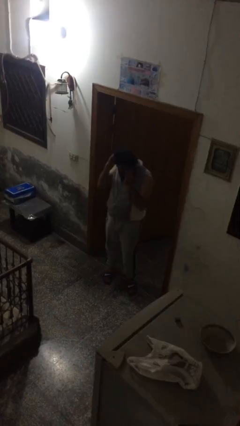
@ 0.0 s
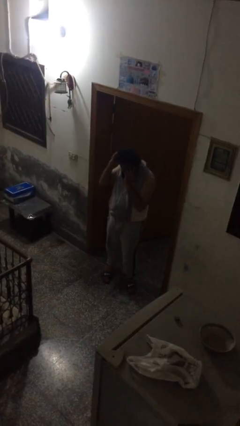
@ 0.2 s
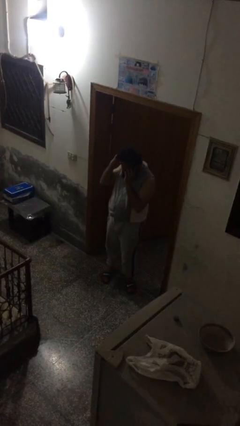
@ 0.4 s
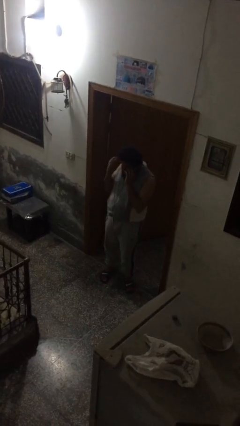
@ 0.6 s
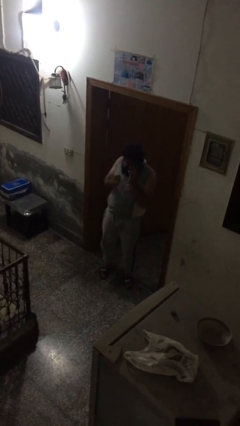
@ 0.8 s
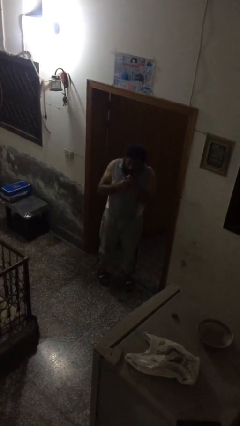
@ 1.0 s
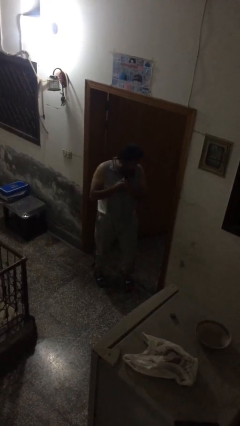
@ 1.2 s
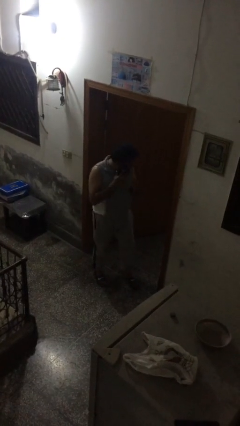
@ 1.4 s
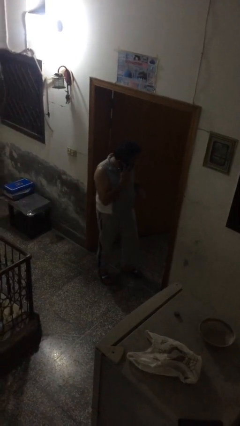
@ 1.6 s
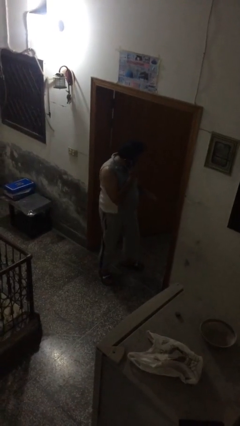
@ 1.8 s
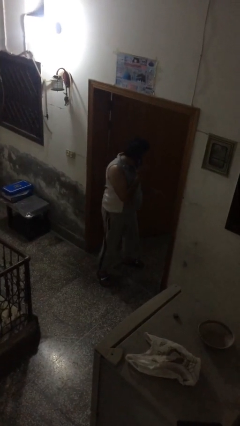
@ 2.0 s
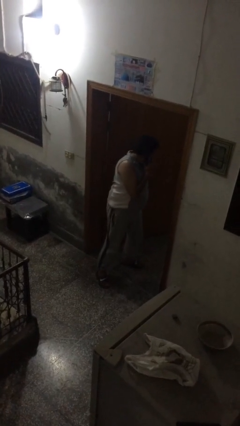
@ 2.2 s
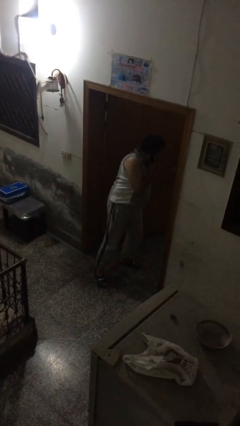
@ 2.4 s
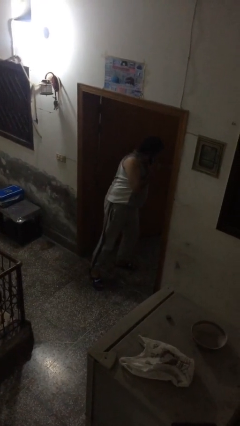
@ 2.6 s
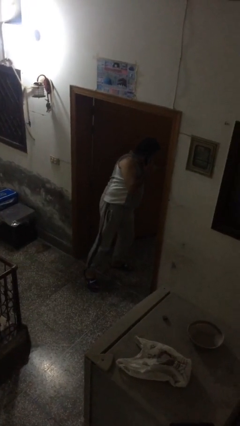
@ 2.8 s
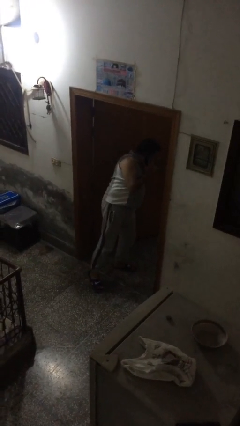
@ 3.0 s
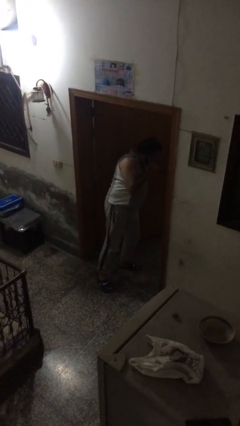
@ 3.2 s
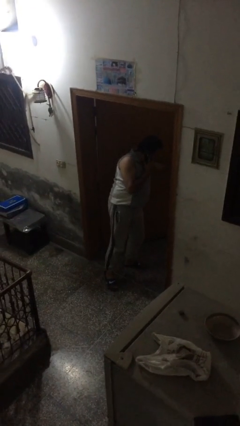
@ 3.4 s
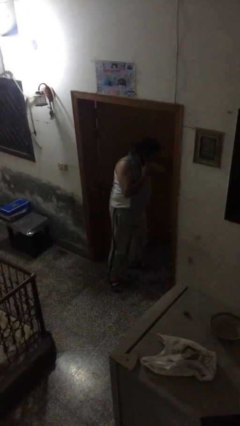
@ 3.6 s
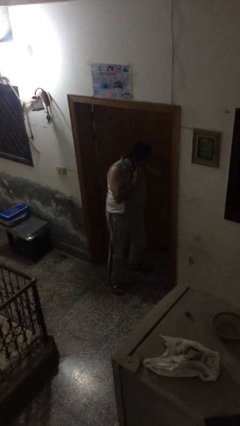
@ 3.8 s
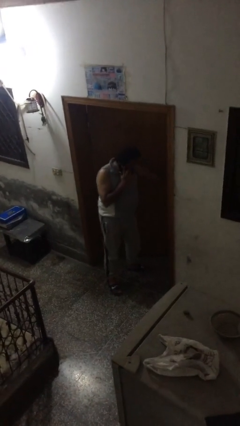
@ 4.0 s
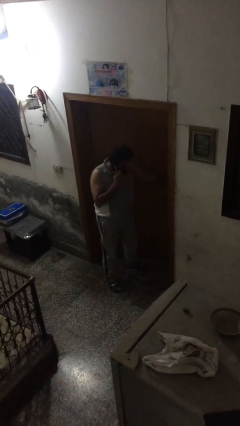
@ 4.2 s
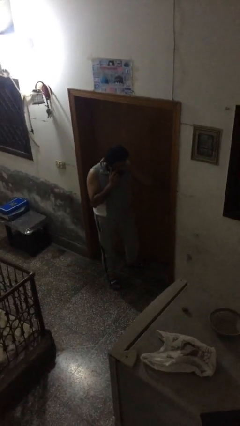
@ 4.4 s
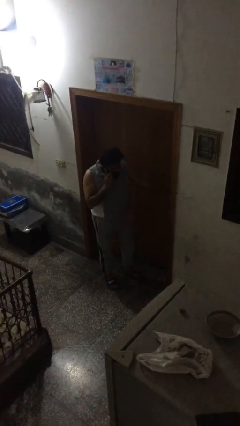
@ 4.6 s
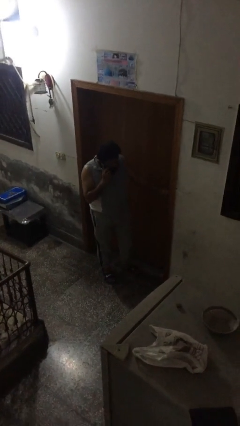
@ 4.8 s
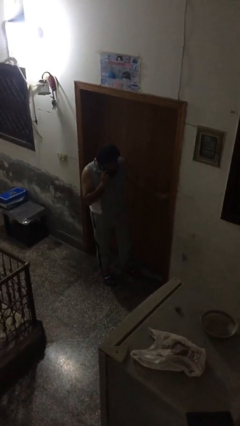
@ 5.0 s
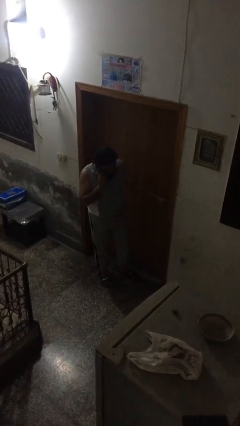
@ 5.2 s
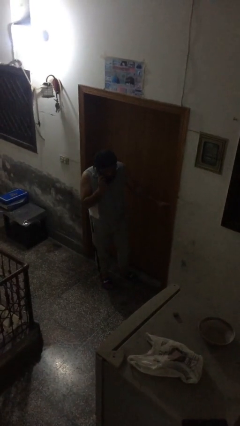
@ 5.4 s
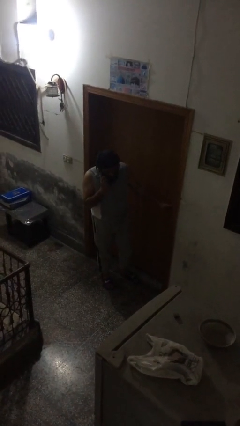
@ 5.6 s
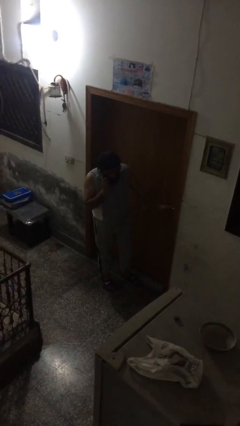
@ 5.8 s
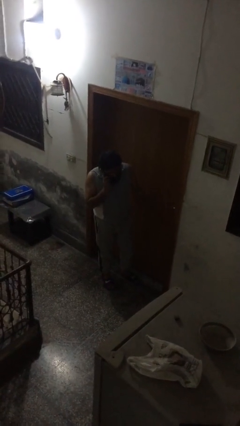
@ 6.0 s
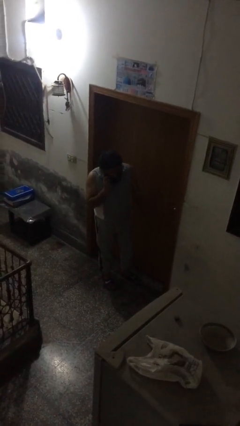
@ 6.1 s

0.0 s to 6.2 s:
person closes facility door

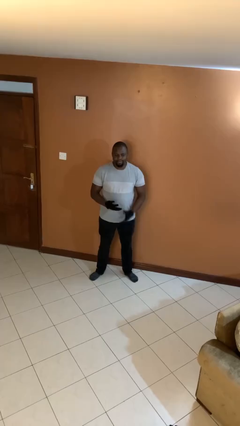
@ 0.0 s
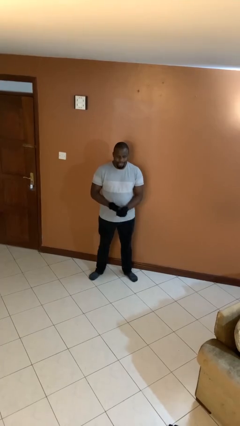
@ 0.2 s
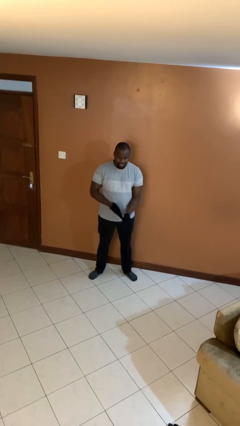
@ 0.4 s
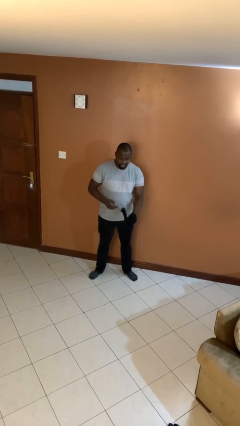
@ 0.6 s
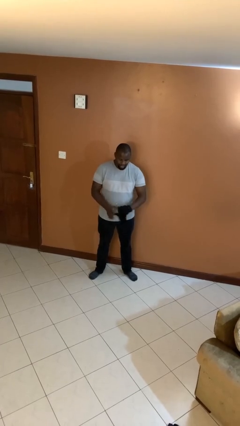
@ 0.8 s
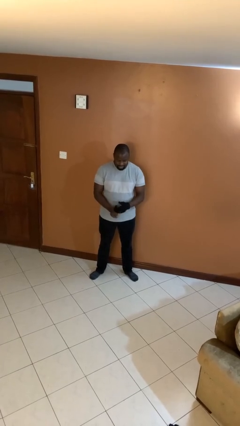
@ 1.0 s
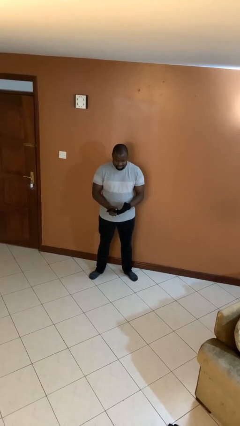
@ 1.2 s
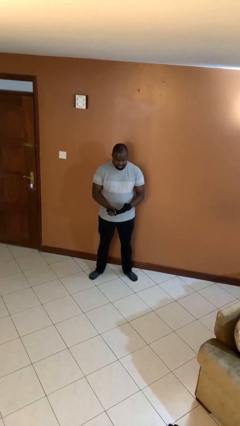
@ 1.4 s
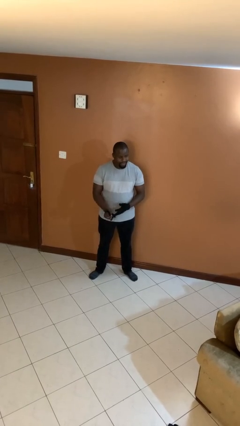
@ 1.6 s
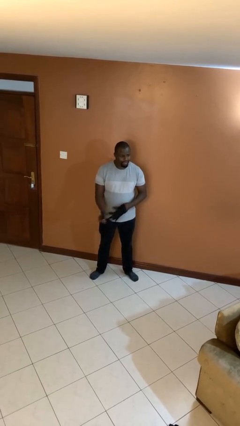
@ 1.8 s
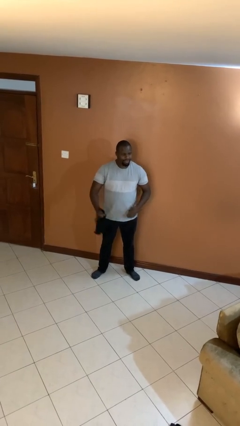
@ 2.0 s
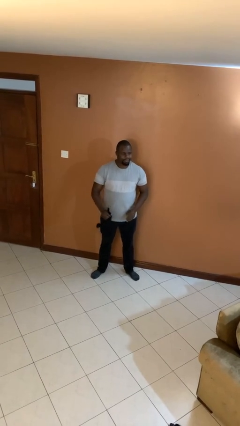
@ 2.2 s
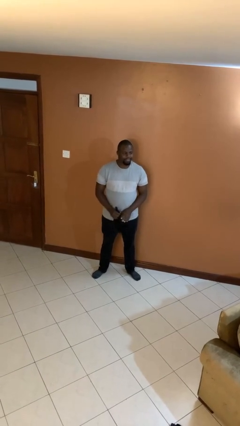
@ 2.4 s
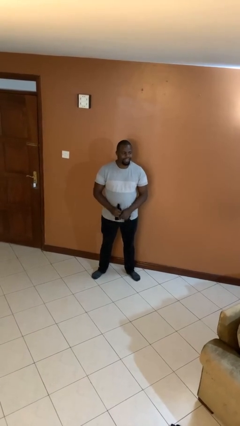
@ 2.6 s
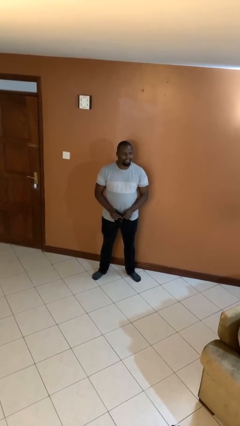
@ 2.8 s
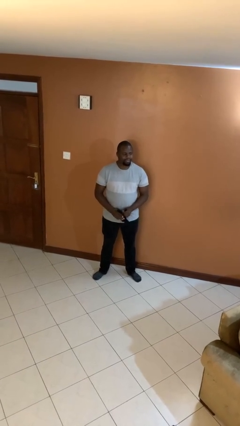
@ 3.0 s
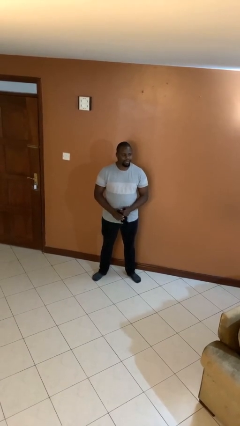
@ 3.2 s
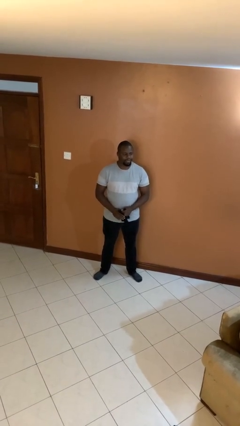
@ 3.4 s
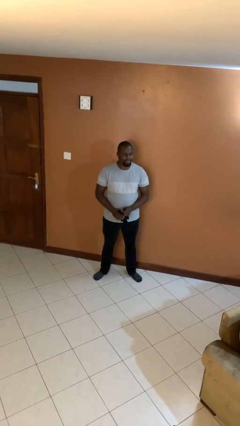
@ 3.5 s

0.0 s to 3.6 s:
person takes off gloves

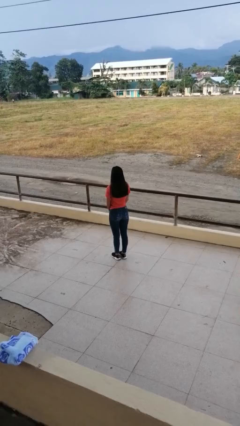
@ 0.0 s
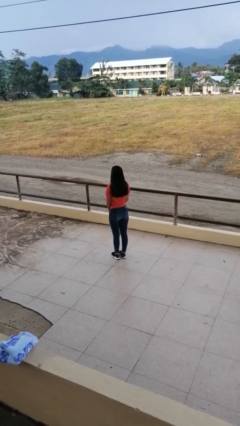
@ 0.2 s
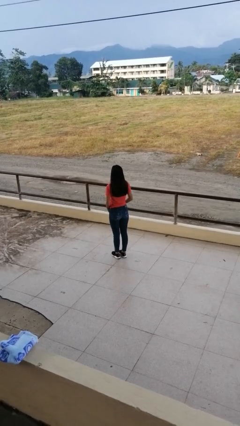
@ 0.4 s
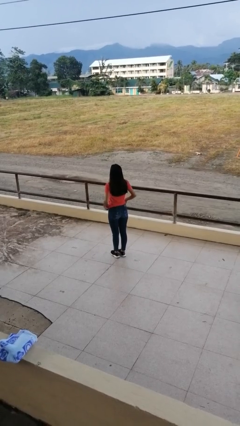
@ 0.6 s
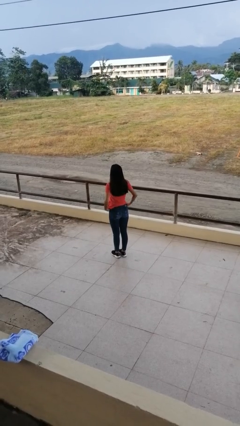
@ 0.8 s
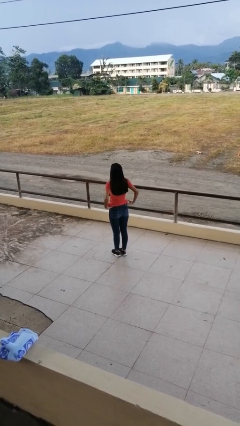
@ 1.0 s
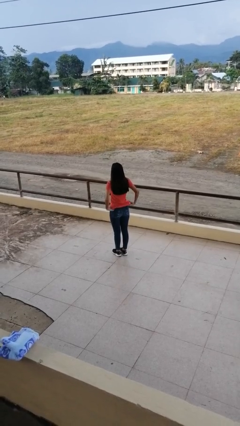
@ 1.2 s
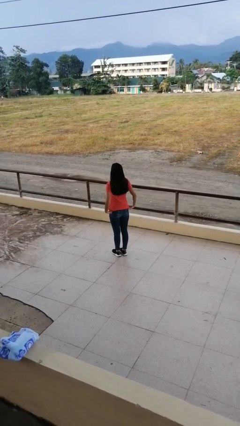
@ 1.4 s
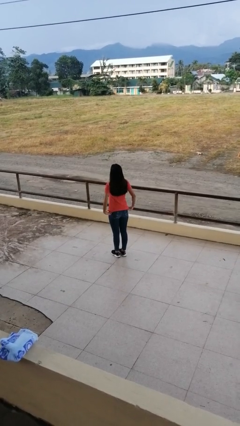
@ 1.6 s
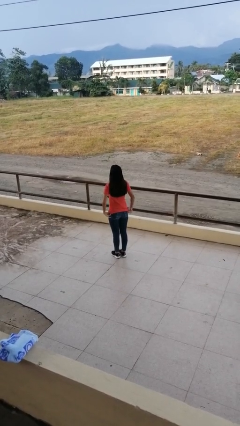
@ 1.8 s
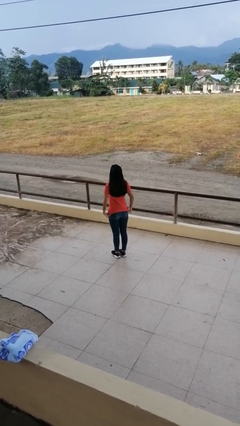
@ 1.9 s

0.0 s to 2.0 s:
person untucks shirt

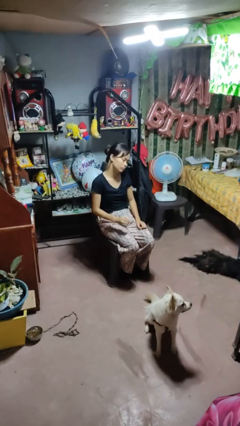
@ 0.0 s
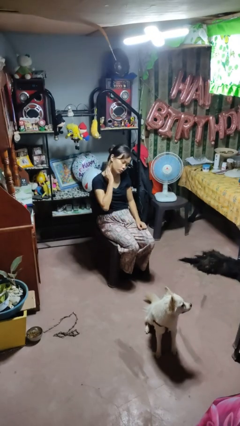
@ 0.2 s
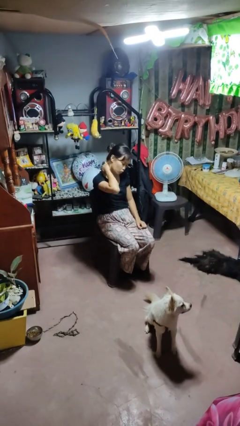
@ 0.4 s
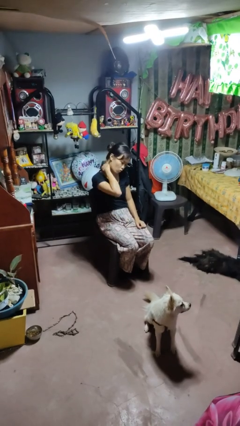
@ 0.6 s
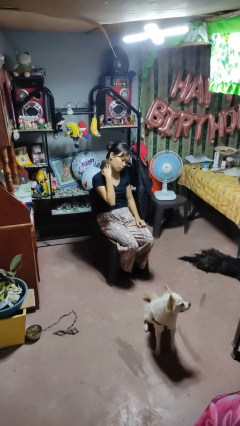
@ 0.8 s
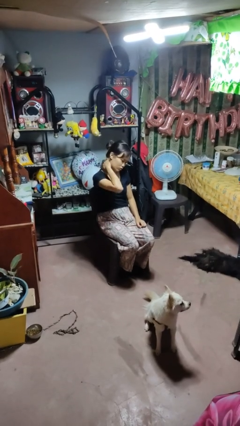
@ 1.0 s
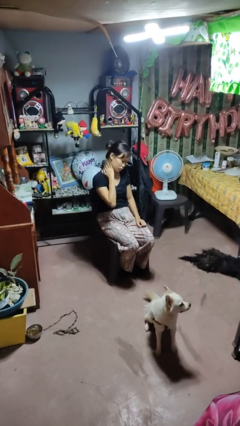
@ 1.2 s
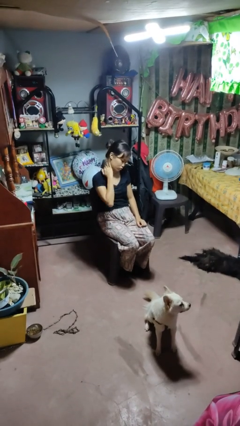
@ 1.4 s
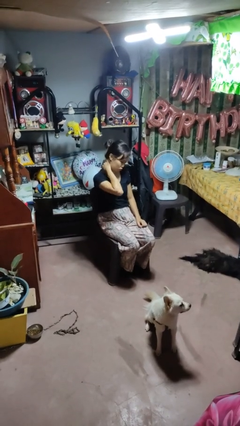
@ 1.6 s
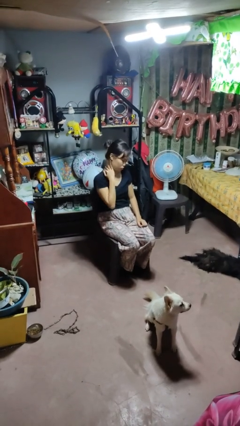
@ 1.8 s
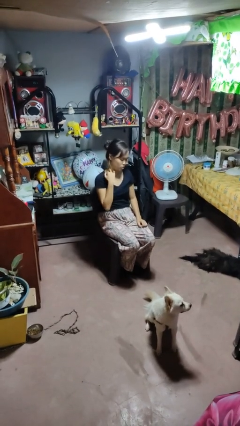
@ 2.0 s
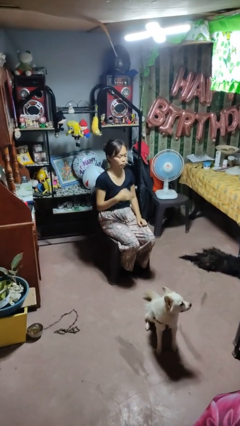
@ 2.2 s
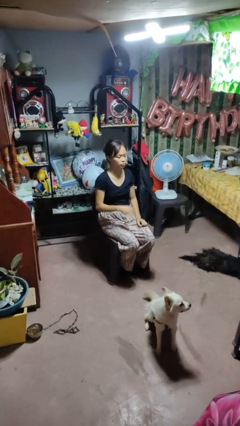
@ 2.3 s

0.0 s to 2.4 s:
person rubs neck

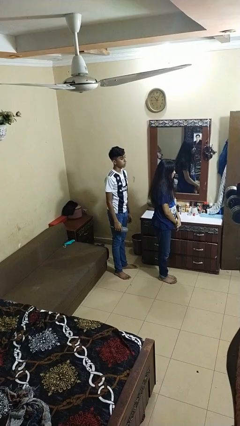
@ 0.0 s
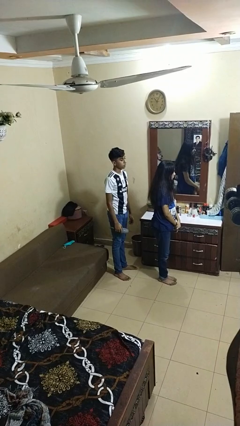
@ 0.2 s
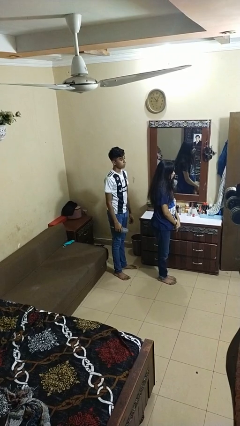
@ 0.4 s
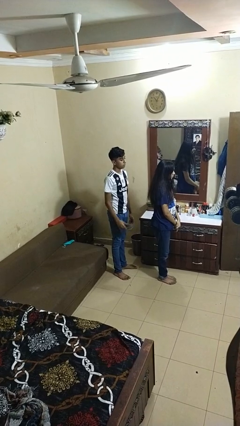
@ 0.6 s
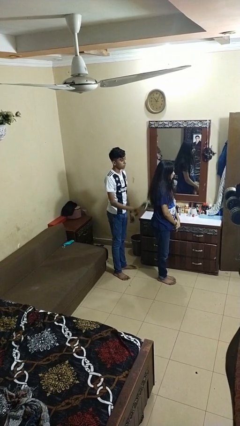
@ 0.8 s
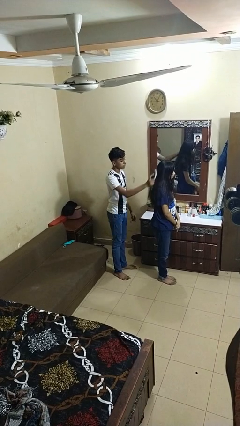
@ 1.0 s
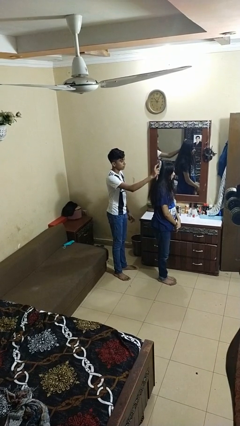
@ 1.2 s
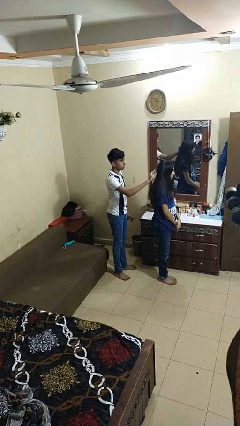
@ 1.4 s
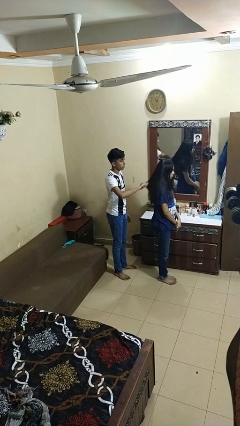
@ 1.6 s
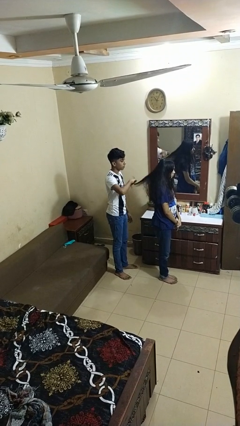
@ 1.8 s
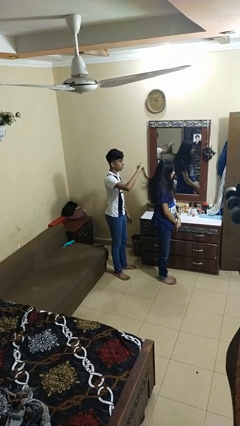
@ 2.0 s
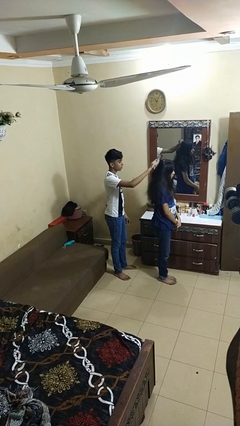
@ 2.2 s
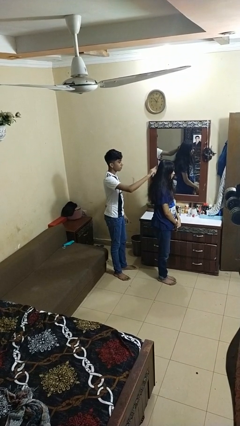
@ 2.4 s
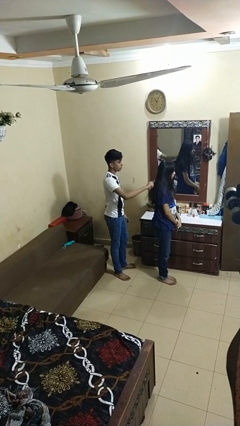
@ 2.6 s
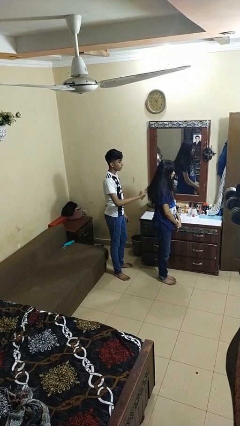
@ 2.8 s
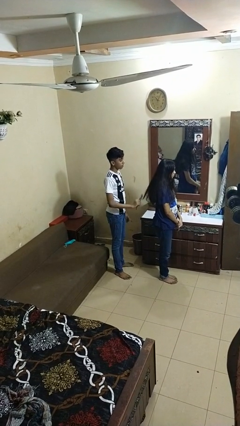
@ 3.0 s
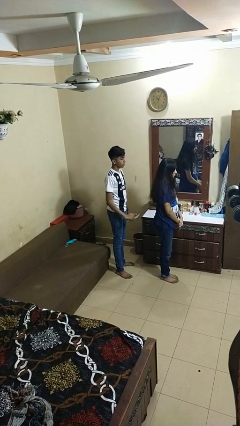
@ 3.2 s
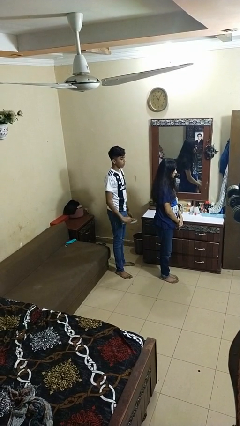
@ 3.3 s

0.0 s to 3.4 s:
person brushes hair of person
